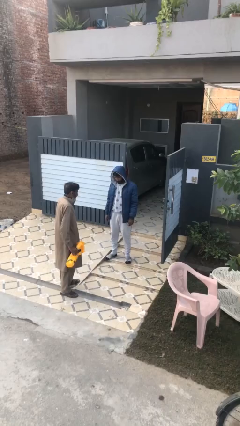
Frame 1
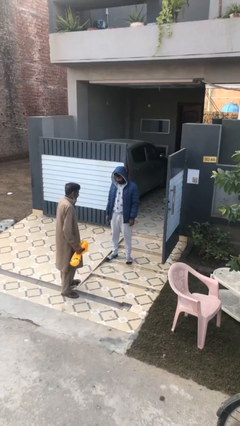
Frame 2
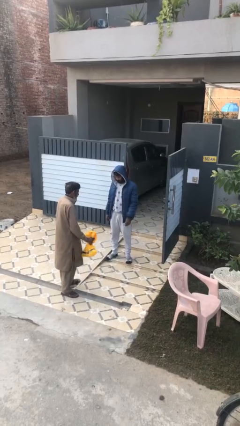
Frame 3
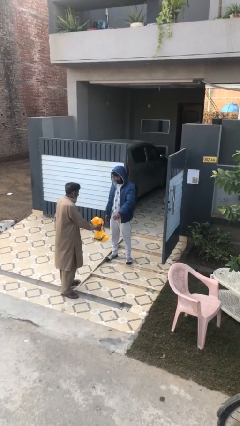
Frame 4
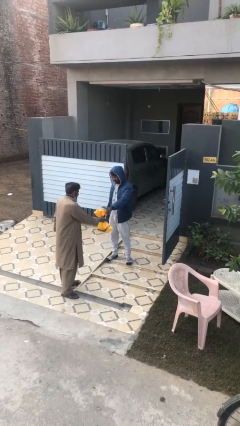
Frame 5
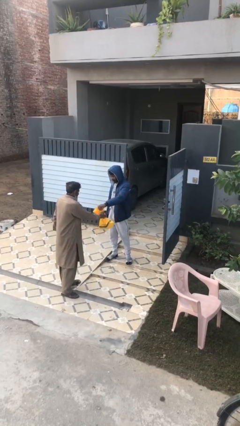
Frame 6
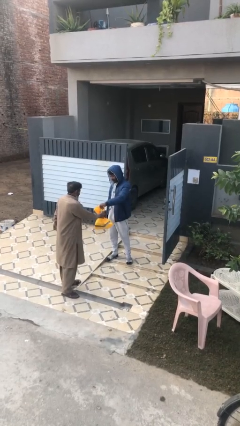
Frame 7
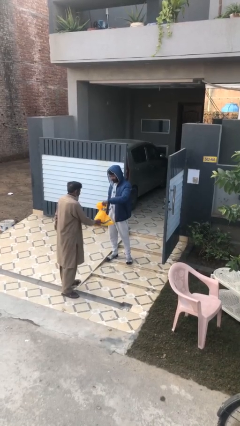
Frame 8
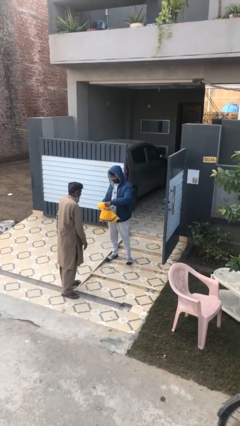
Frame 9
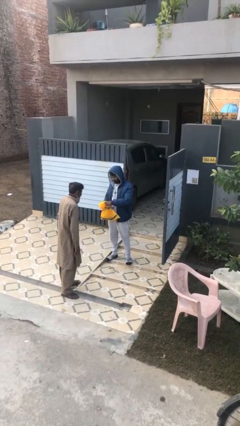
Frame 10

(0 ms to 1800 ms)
person transfers object to person

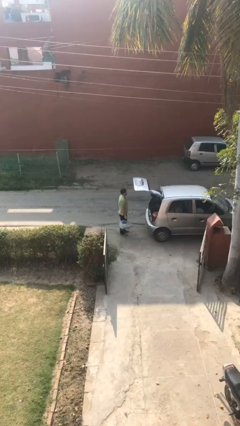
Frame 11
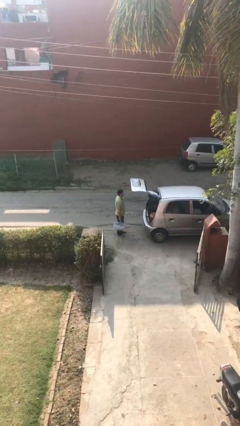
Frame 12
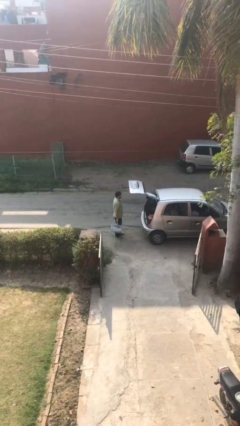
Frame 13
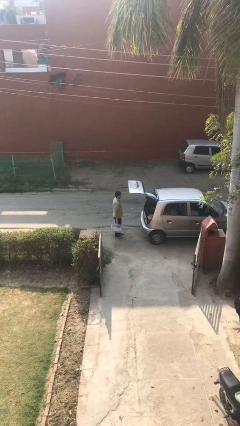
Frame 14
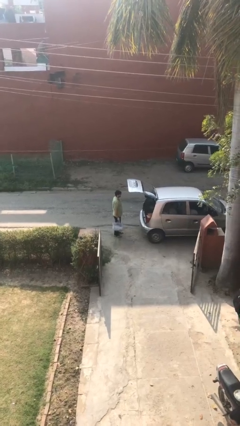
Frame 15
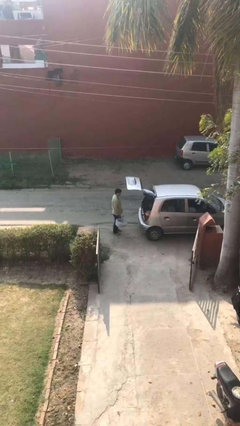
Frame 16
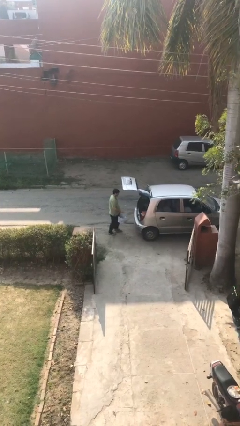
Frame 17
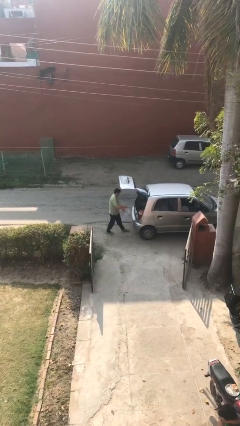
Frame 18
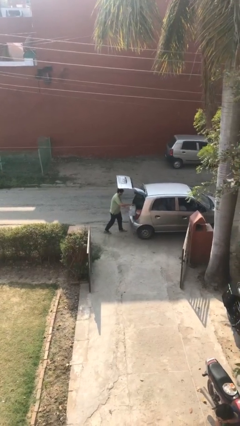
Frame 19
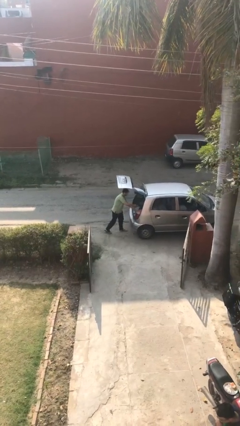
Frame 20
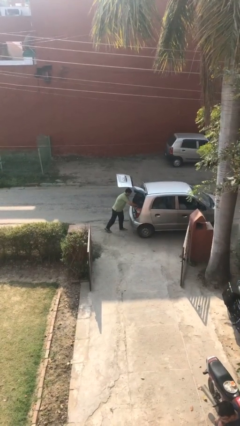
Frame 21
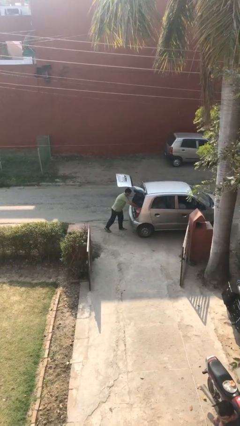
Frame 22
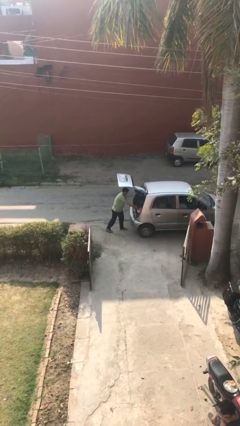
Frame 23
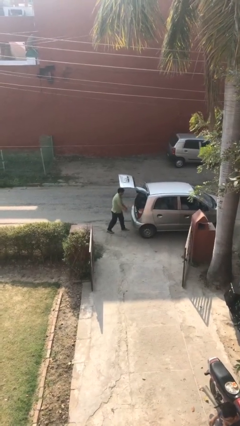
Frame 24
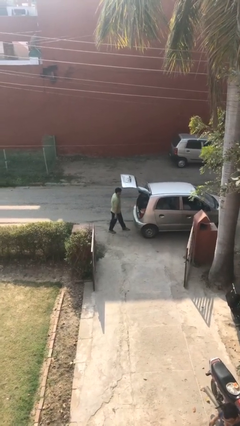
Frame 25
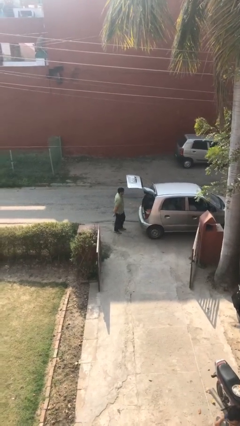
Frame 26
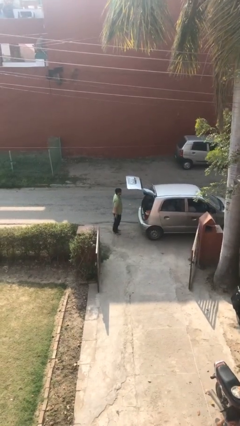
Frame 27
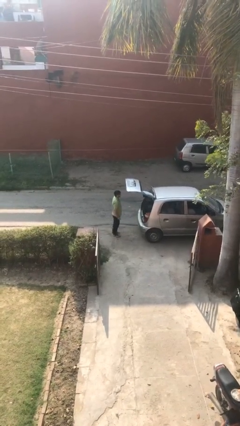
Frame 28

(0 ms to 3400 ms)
person loads car

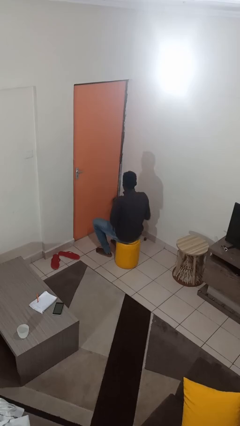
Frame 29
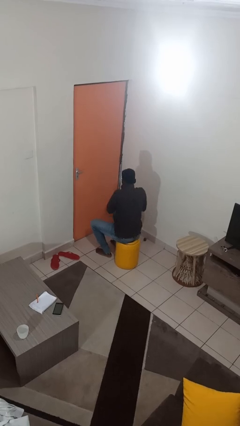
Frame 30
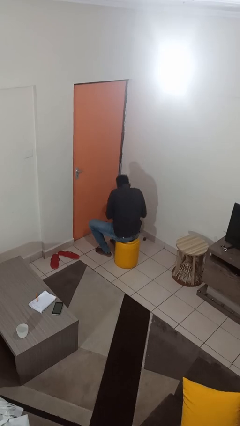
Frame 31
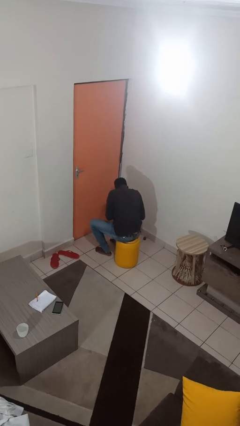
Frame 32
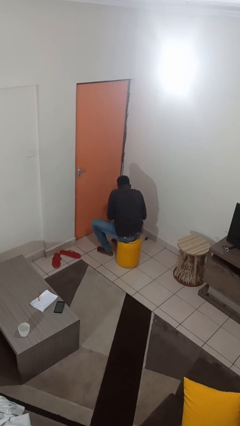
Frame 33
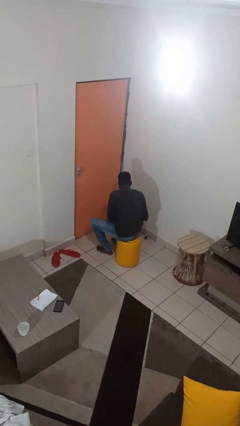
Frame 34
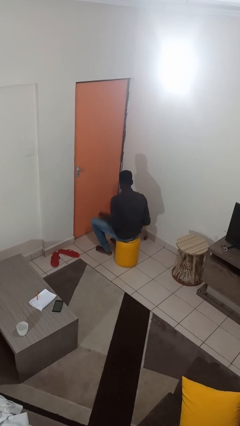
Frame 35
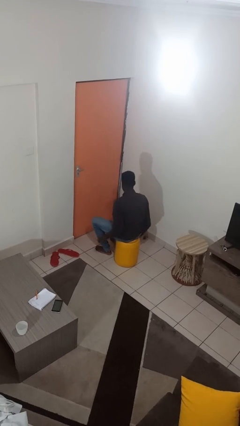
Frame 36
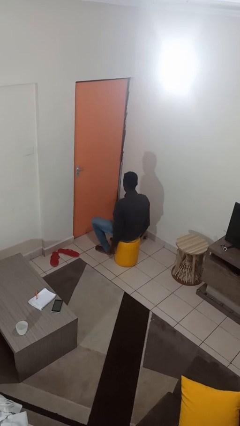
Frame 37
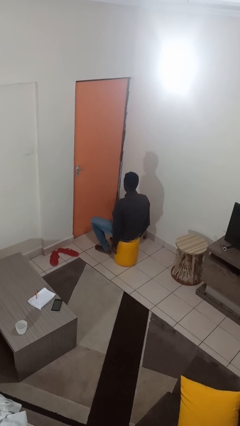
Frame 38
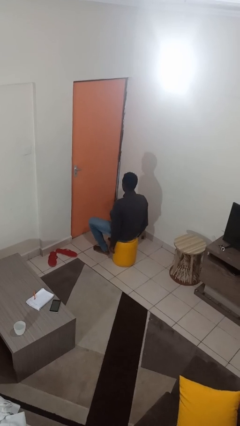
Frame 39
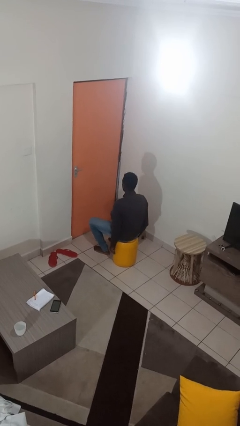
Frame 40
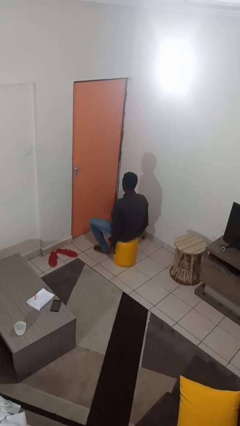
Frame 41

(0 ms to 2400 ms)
person sneezes into hand

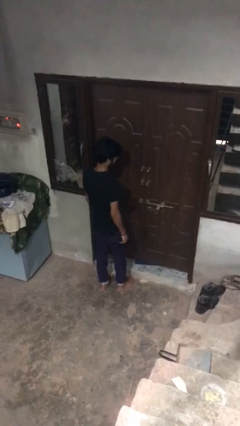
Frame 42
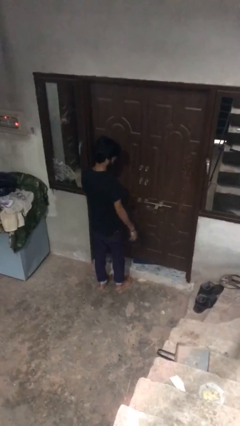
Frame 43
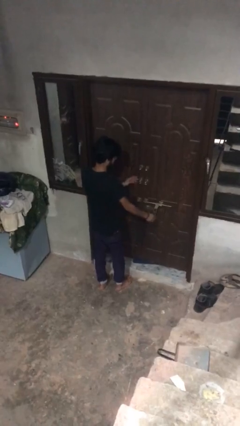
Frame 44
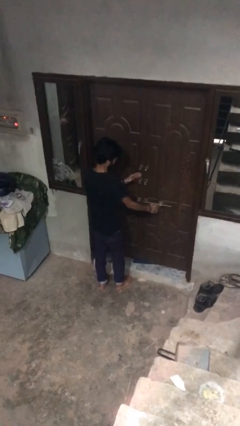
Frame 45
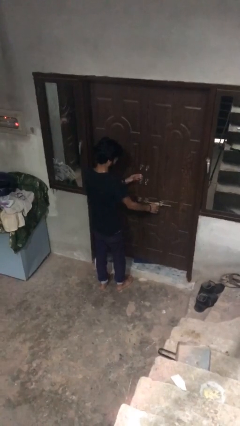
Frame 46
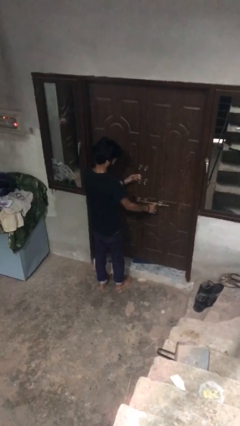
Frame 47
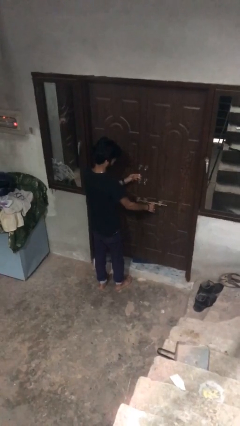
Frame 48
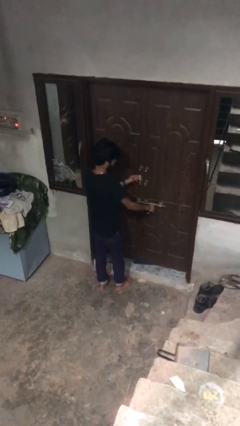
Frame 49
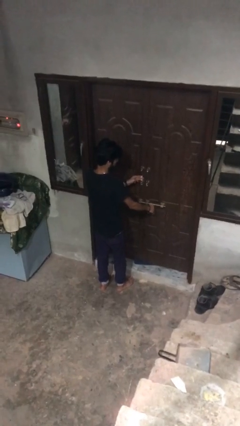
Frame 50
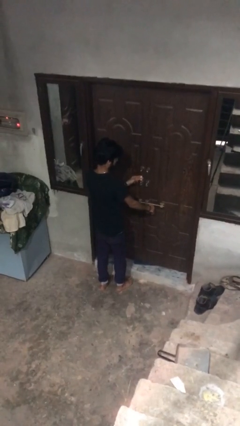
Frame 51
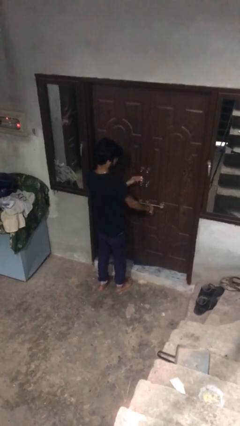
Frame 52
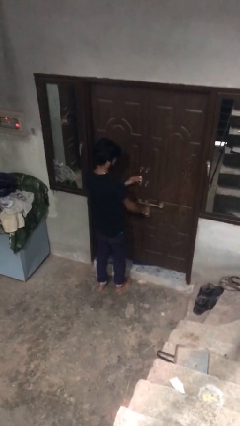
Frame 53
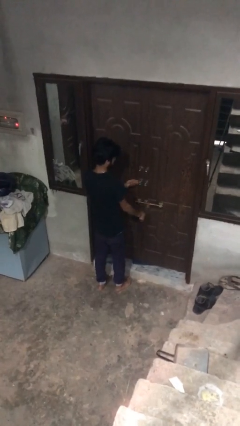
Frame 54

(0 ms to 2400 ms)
person locks door with keys

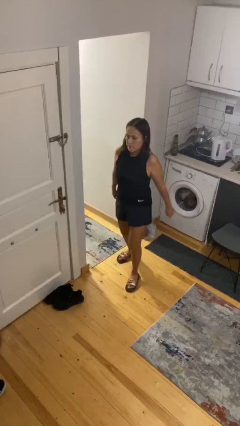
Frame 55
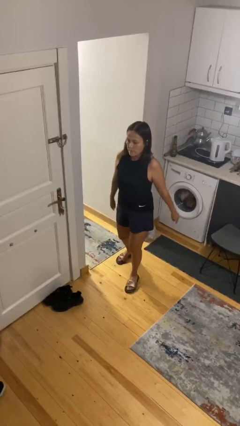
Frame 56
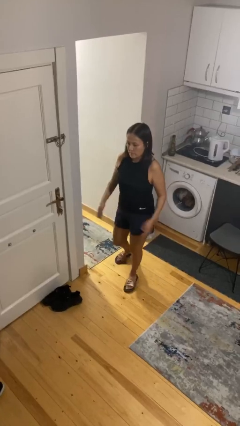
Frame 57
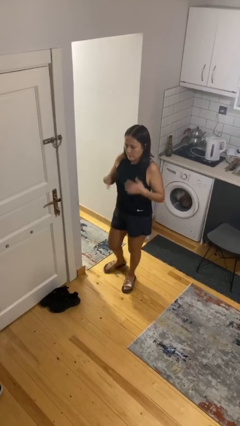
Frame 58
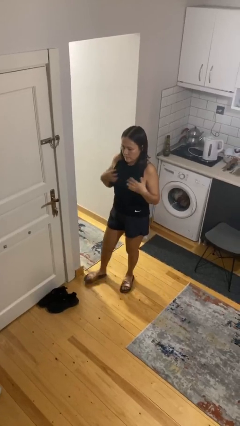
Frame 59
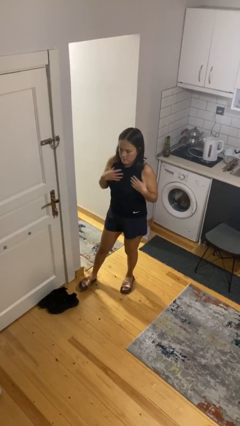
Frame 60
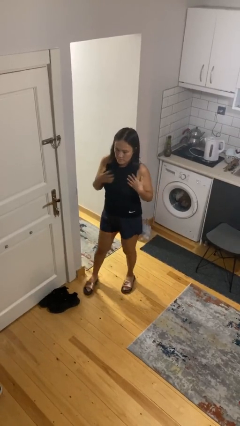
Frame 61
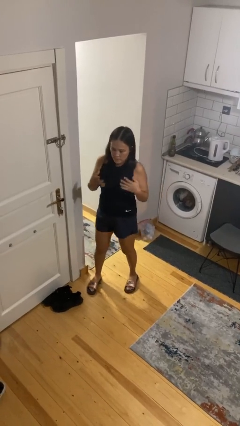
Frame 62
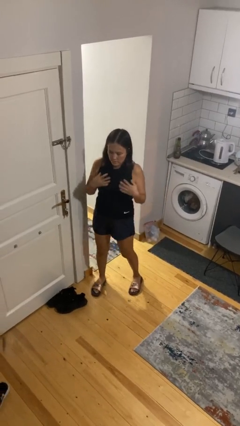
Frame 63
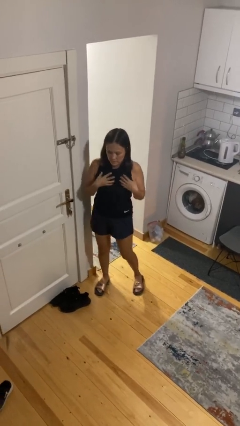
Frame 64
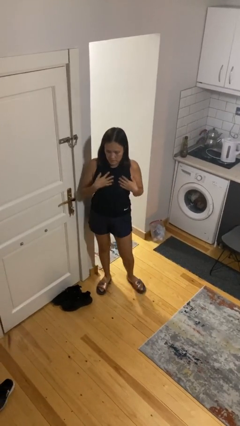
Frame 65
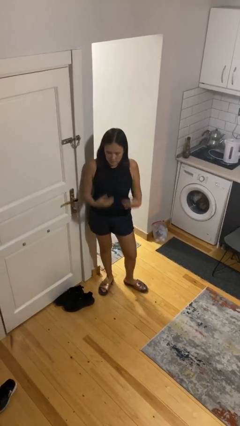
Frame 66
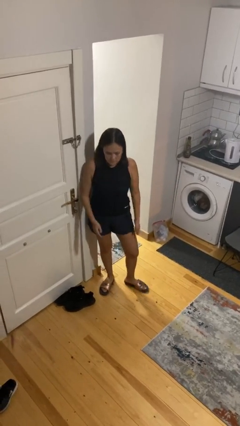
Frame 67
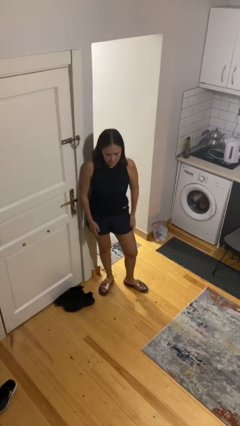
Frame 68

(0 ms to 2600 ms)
person drums on chest

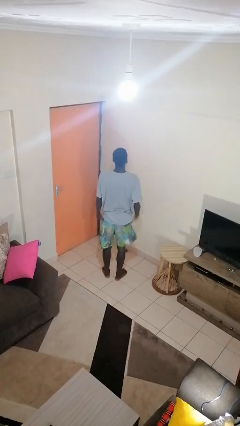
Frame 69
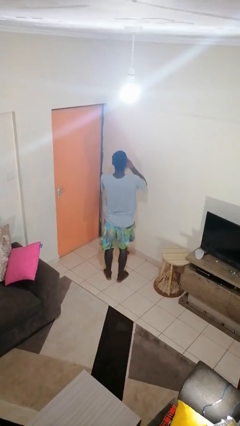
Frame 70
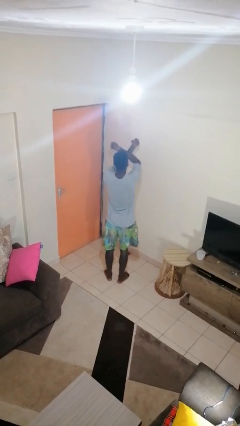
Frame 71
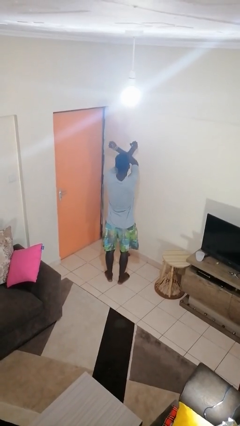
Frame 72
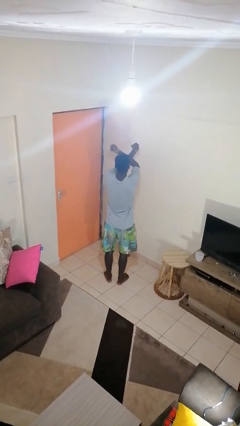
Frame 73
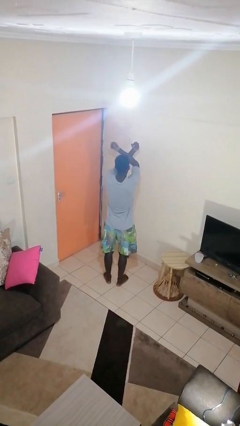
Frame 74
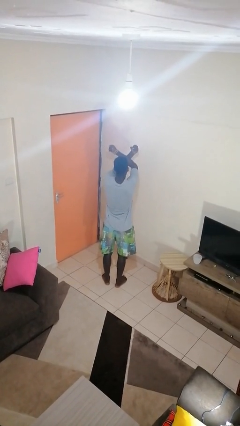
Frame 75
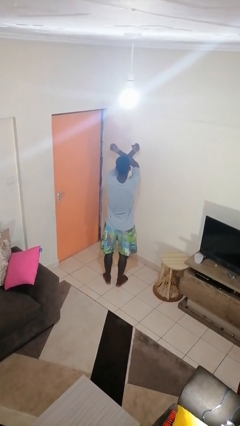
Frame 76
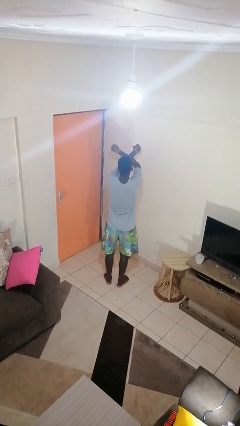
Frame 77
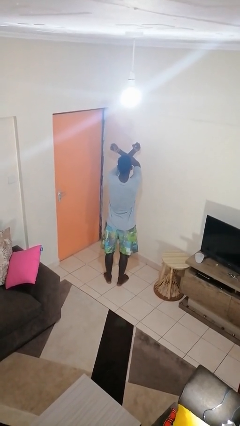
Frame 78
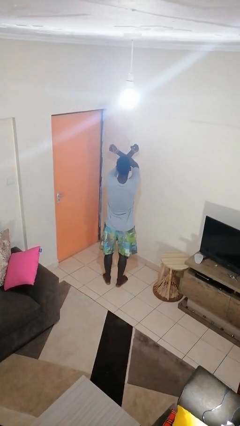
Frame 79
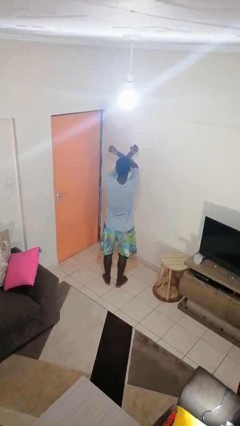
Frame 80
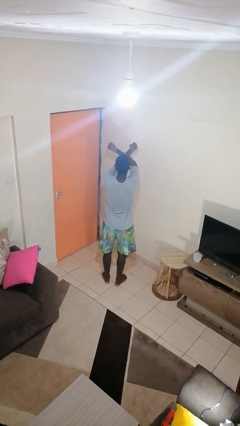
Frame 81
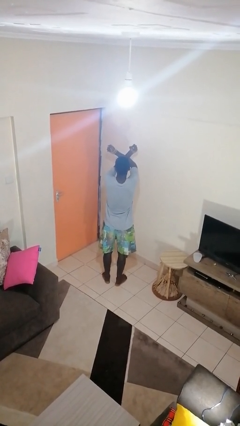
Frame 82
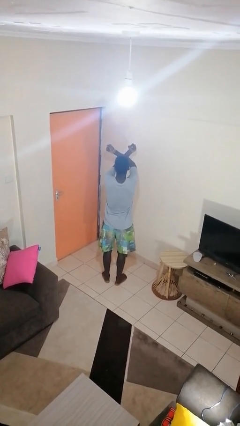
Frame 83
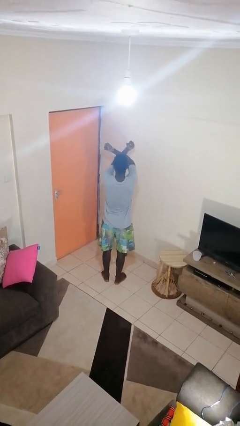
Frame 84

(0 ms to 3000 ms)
person gestures arms x

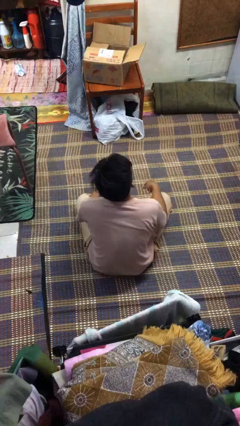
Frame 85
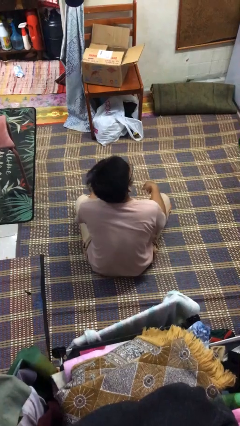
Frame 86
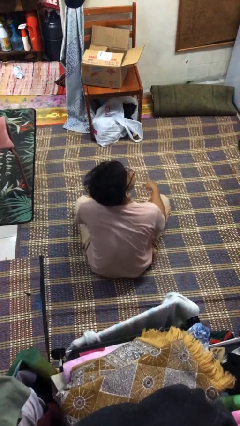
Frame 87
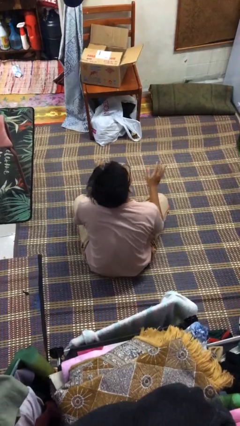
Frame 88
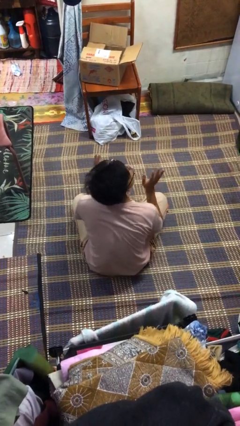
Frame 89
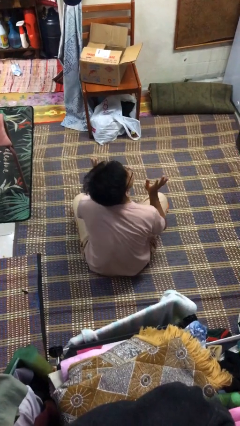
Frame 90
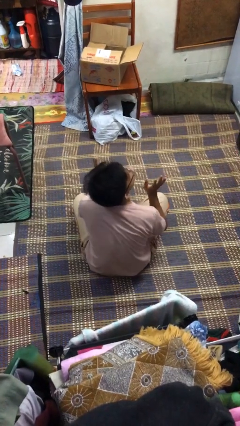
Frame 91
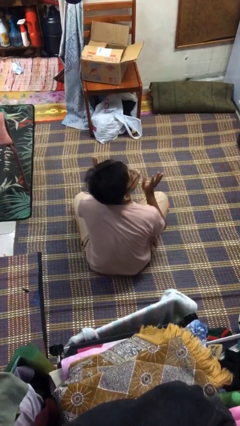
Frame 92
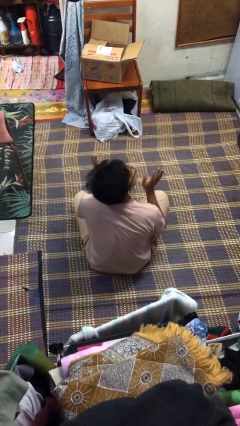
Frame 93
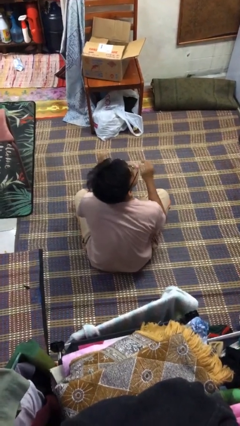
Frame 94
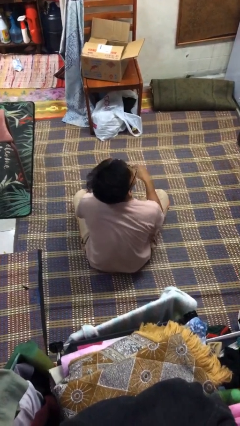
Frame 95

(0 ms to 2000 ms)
person sticks out tongue
